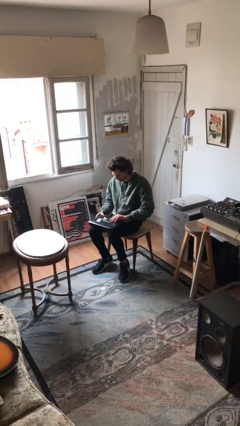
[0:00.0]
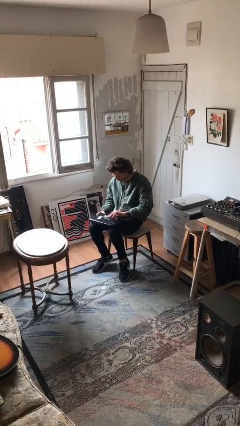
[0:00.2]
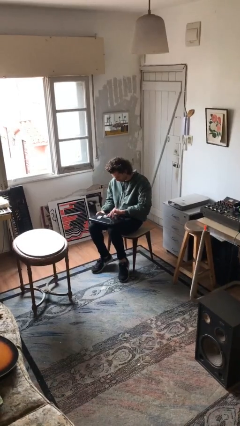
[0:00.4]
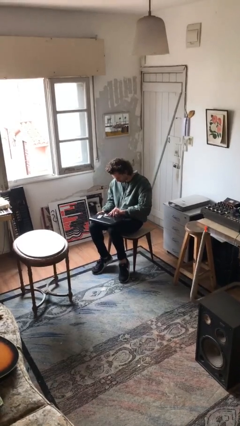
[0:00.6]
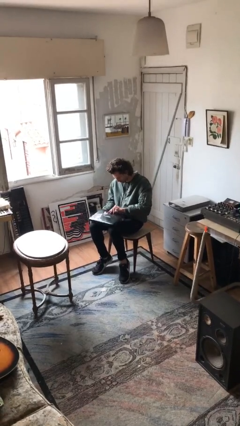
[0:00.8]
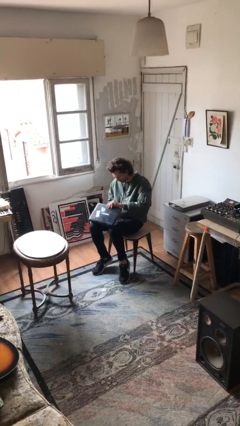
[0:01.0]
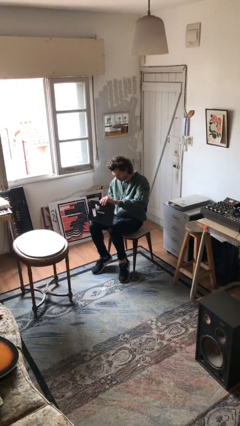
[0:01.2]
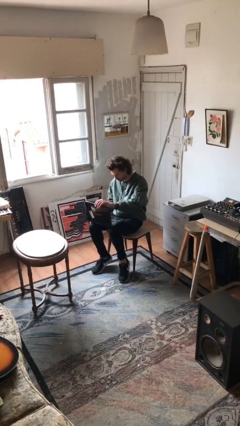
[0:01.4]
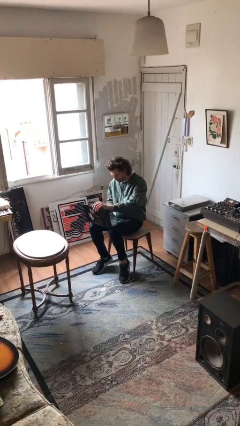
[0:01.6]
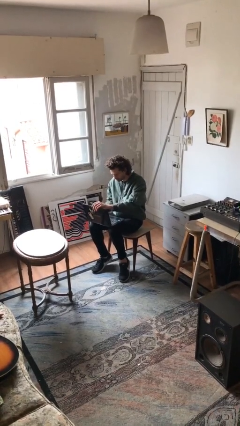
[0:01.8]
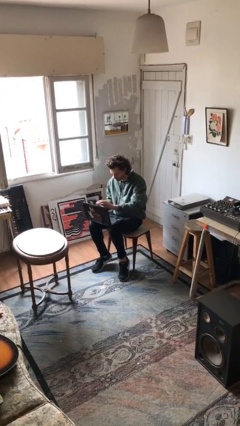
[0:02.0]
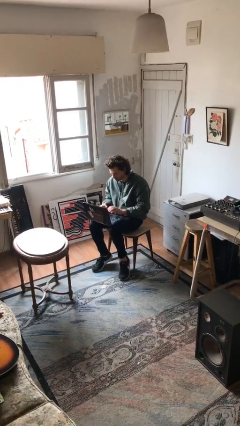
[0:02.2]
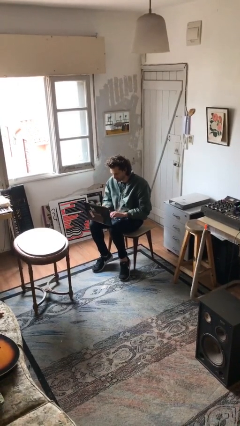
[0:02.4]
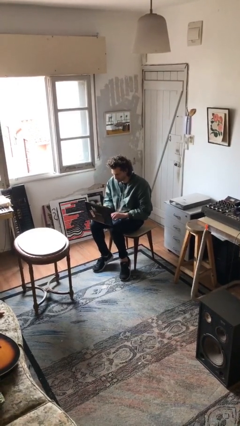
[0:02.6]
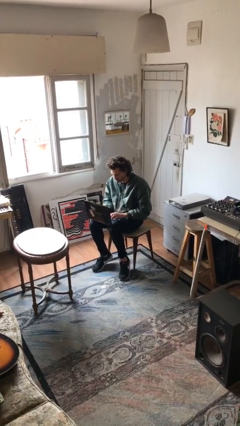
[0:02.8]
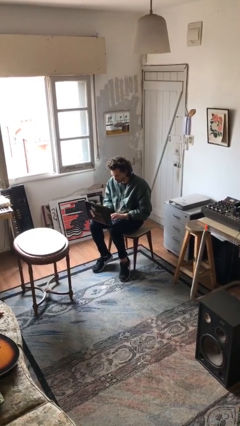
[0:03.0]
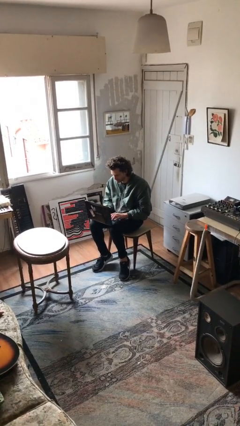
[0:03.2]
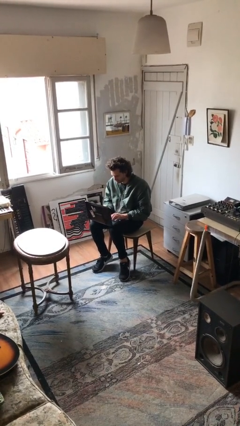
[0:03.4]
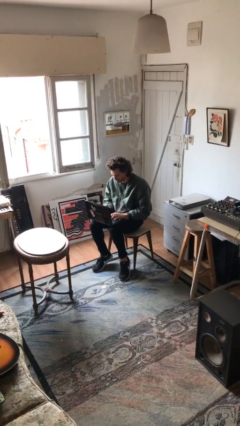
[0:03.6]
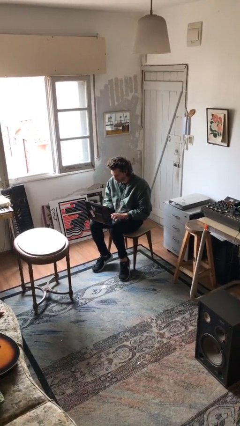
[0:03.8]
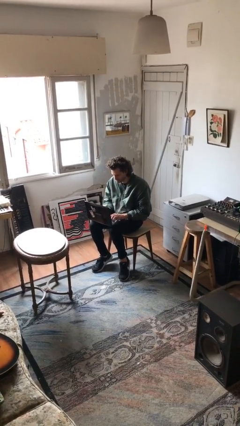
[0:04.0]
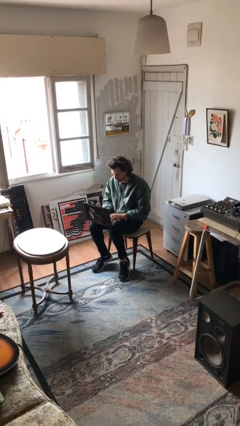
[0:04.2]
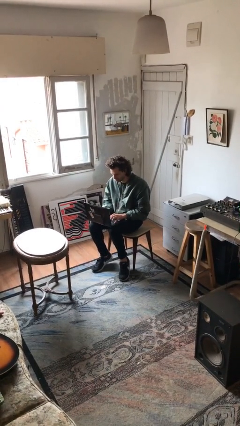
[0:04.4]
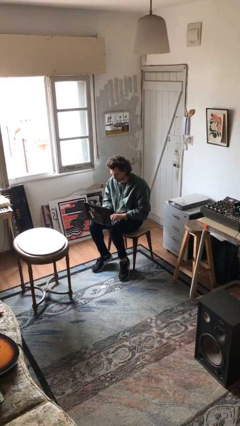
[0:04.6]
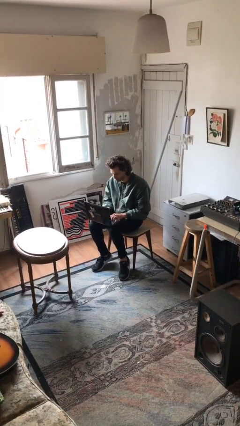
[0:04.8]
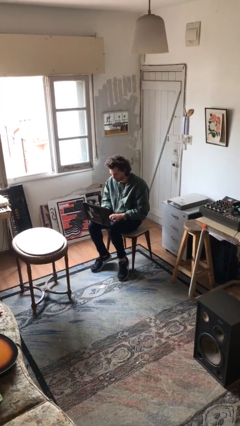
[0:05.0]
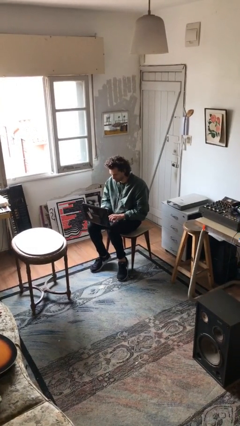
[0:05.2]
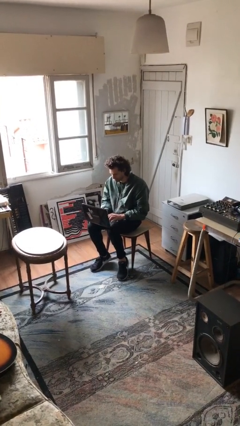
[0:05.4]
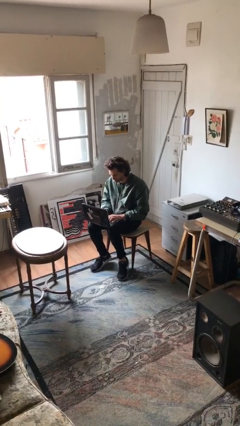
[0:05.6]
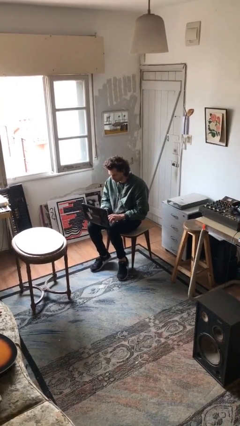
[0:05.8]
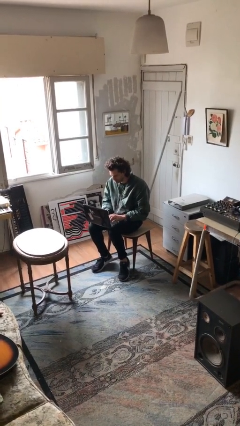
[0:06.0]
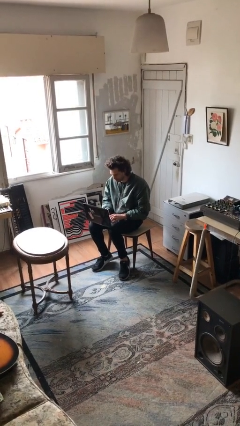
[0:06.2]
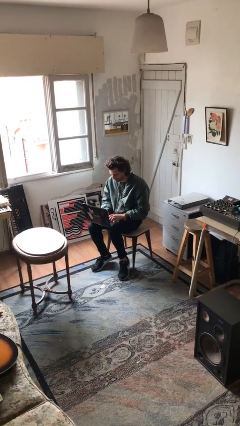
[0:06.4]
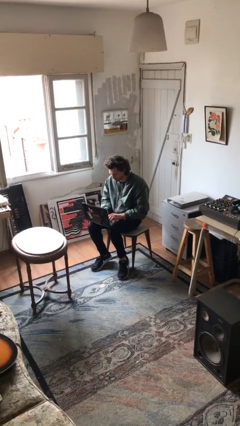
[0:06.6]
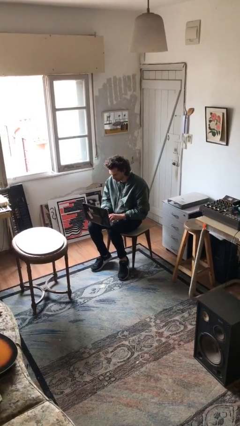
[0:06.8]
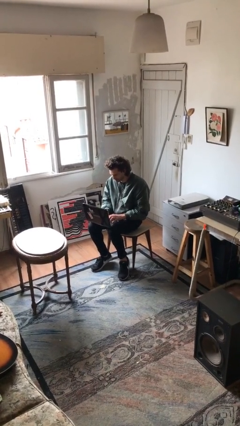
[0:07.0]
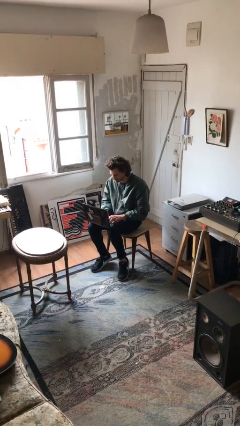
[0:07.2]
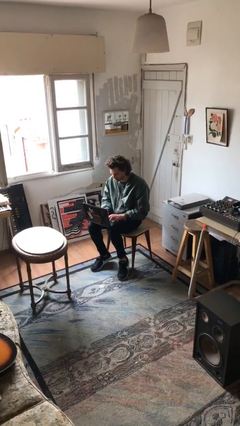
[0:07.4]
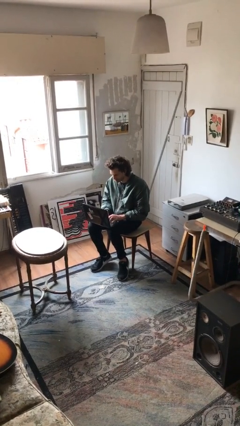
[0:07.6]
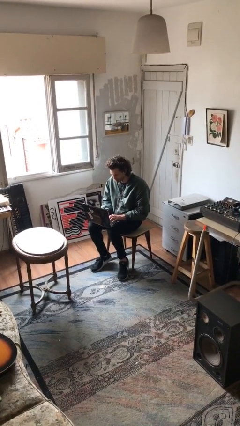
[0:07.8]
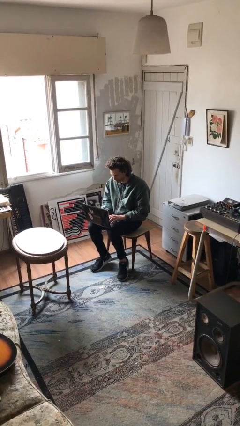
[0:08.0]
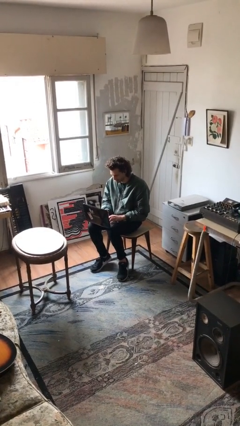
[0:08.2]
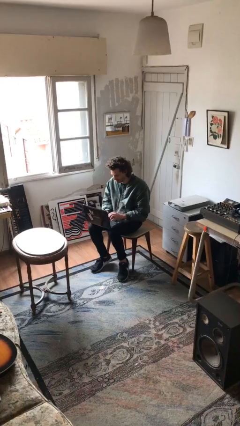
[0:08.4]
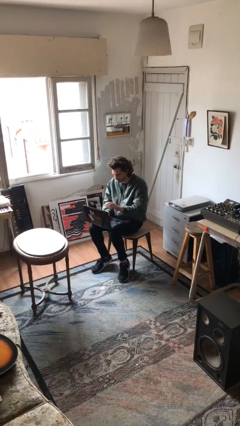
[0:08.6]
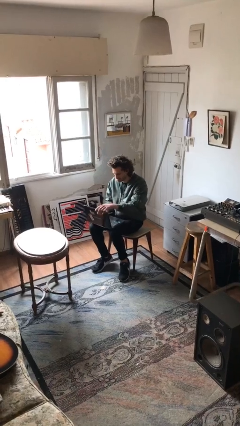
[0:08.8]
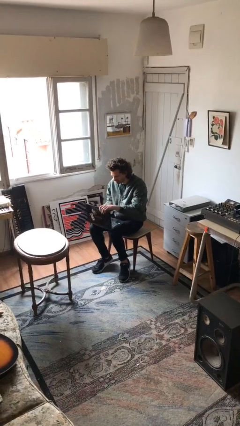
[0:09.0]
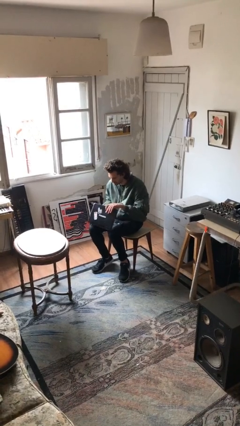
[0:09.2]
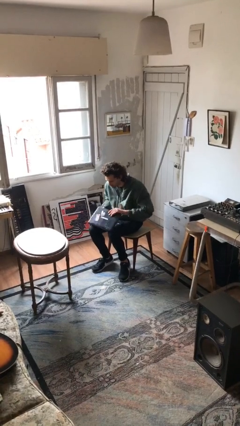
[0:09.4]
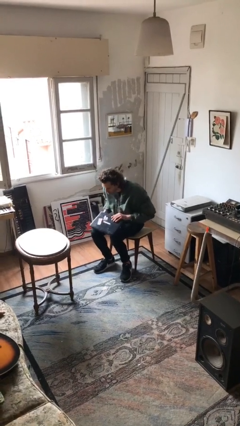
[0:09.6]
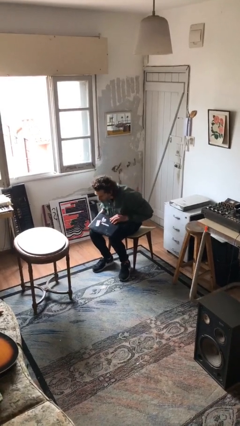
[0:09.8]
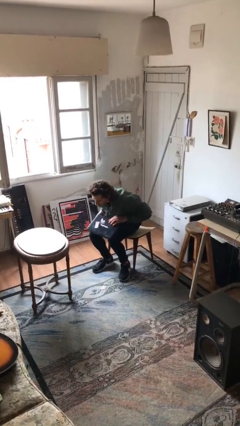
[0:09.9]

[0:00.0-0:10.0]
person interacts with laptop

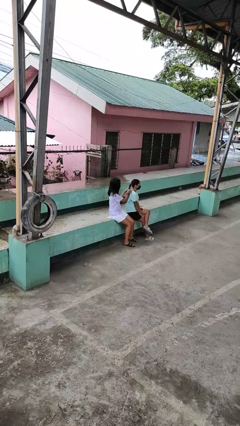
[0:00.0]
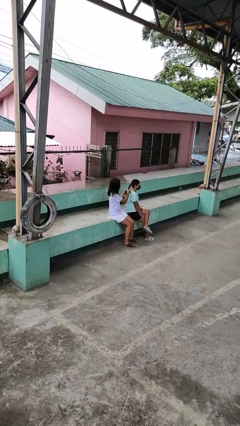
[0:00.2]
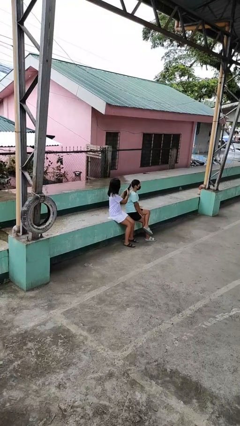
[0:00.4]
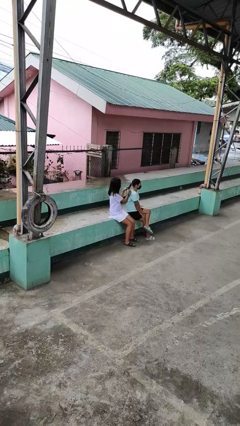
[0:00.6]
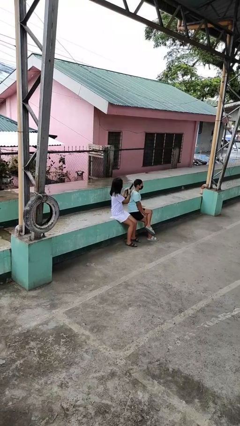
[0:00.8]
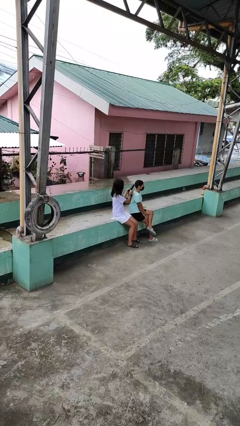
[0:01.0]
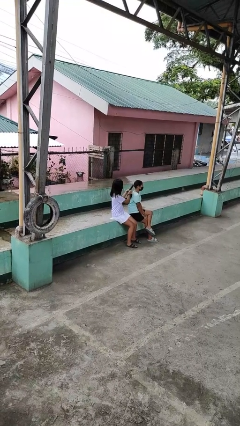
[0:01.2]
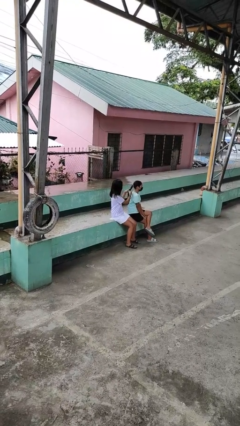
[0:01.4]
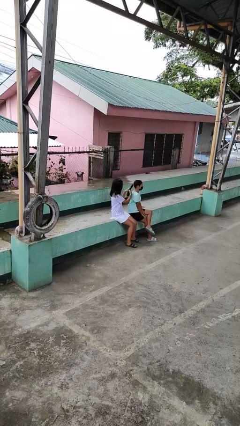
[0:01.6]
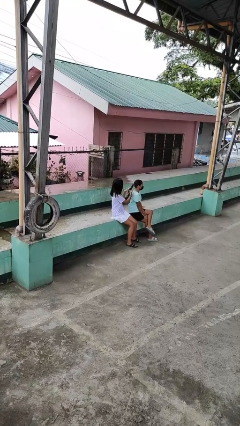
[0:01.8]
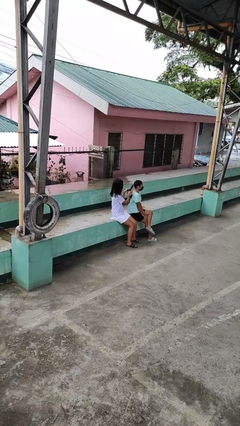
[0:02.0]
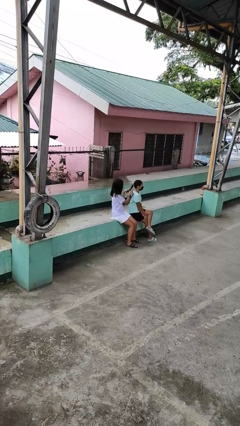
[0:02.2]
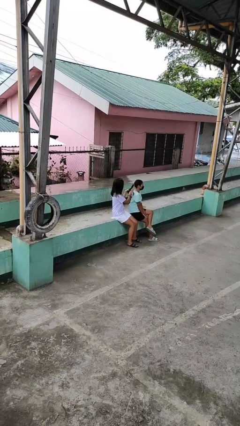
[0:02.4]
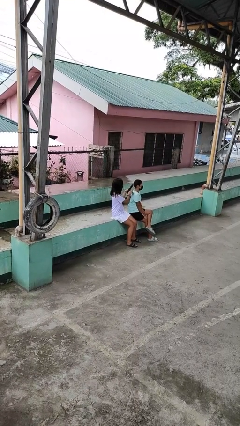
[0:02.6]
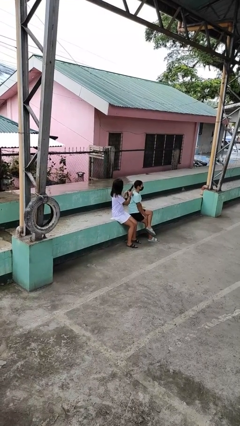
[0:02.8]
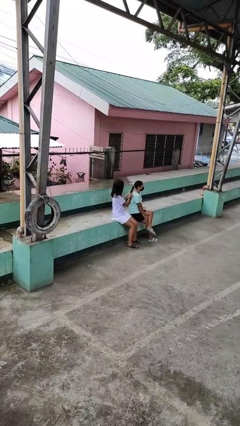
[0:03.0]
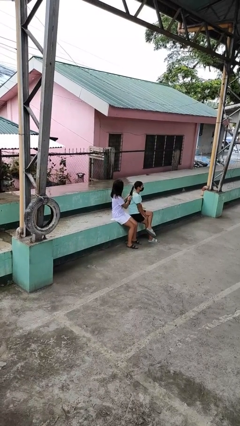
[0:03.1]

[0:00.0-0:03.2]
person braids hair of person

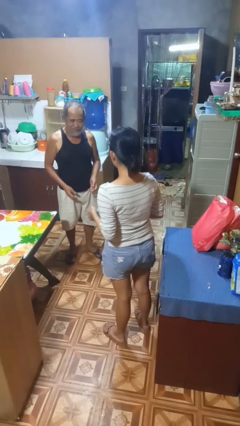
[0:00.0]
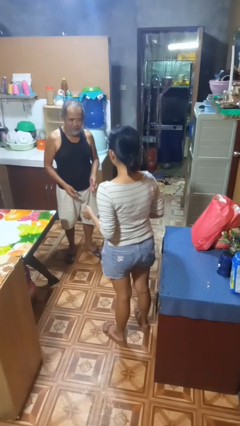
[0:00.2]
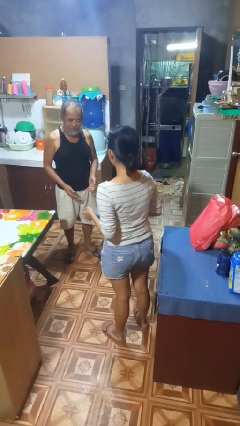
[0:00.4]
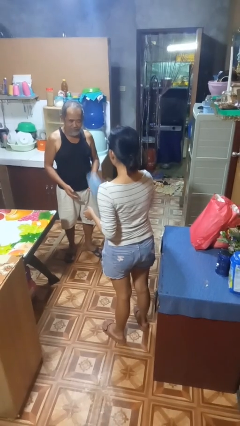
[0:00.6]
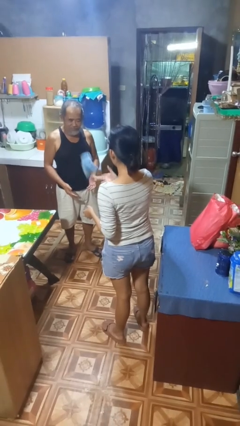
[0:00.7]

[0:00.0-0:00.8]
person catches object from person

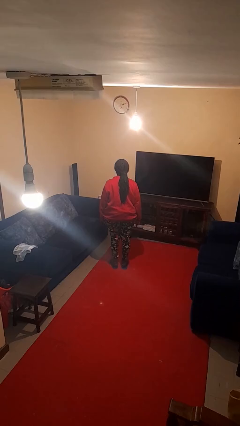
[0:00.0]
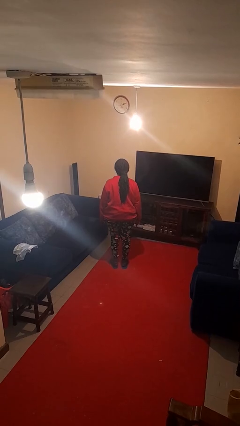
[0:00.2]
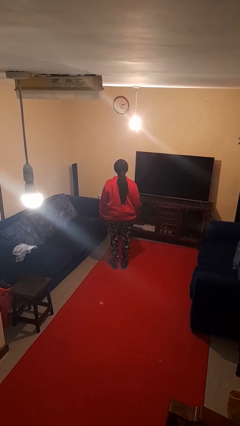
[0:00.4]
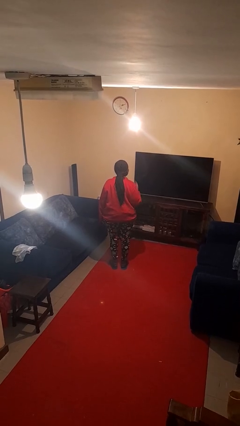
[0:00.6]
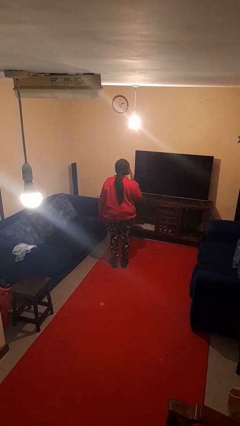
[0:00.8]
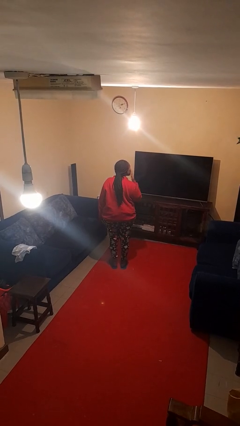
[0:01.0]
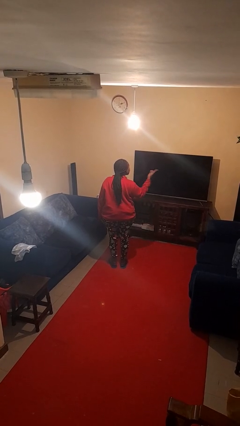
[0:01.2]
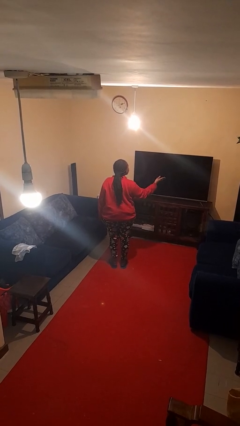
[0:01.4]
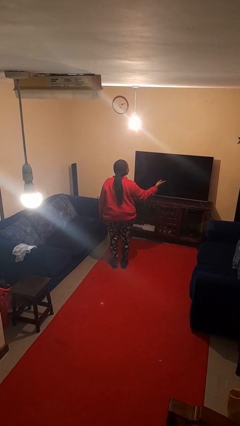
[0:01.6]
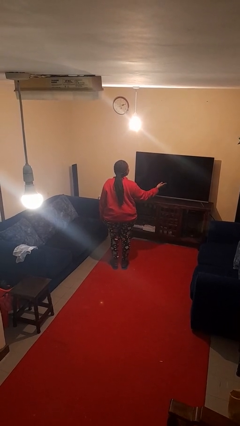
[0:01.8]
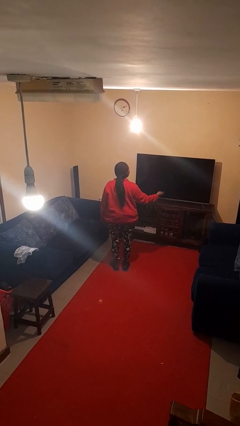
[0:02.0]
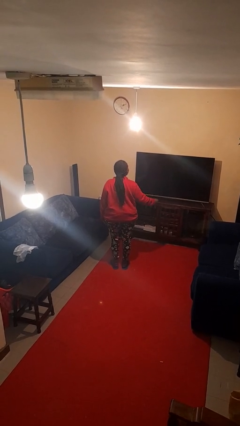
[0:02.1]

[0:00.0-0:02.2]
person gestures blow kiss

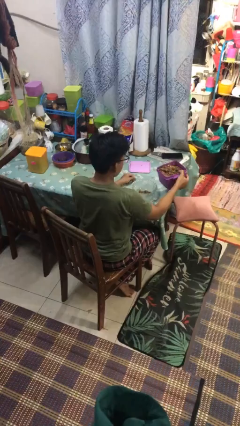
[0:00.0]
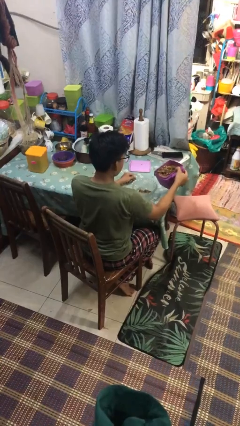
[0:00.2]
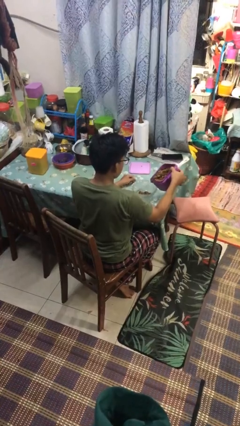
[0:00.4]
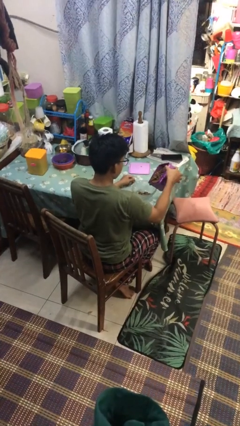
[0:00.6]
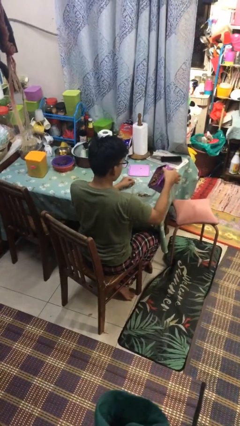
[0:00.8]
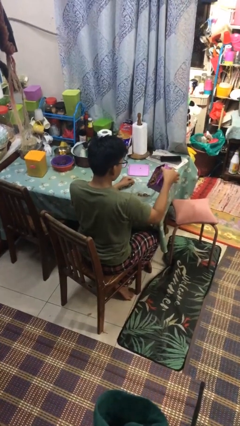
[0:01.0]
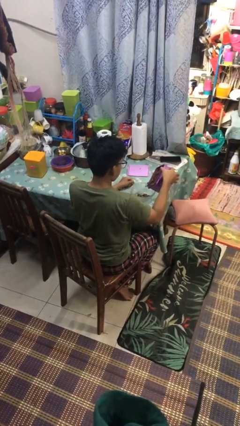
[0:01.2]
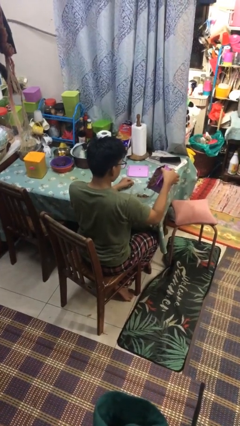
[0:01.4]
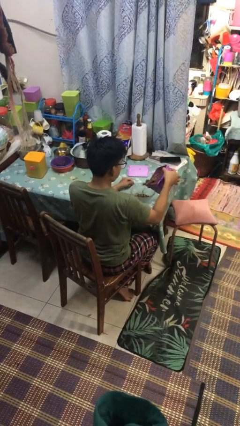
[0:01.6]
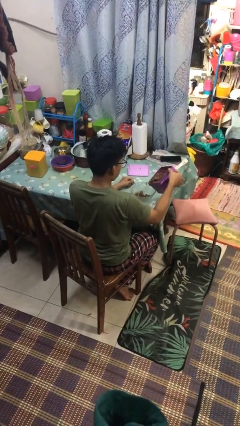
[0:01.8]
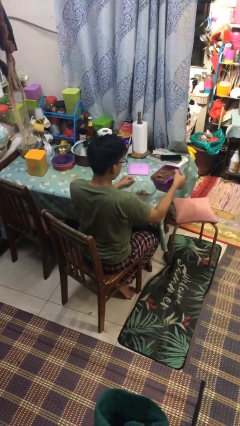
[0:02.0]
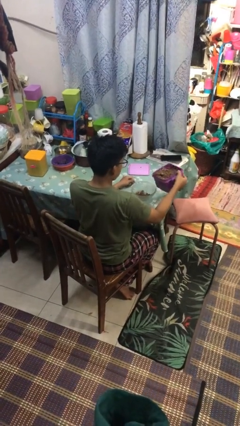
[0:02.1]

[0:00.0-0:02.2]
person pours into bowl
